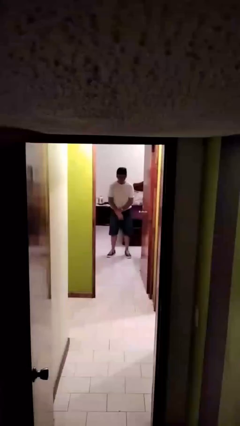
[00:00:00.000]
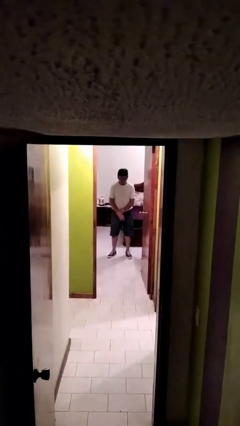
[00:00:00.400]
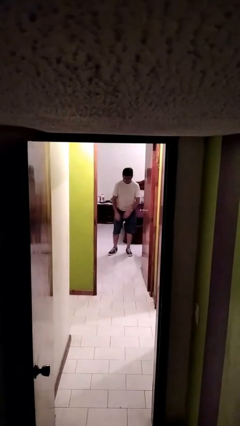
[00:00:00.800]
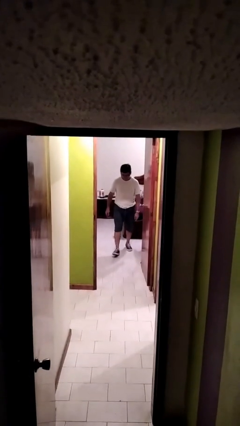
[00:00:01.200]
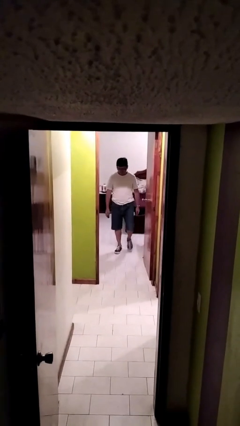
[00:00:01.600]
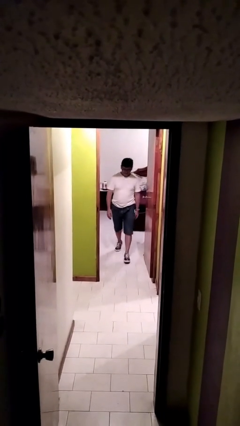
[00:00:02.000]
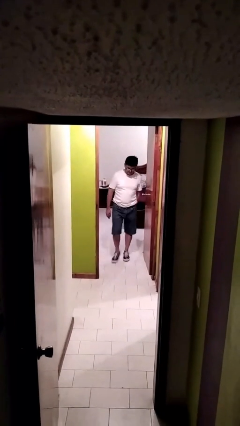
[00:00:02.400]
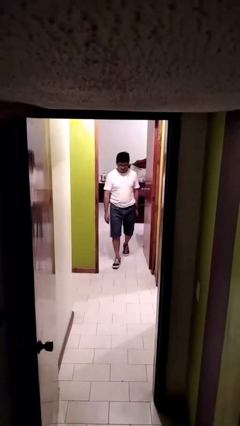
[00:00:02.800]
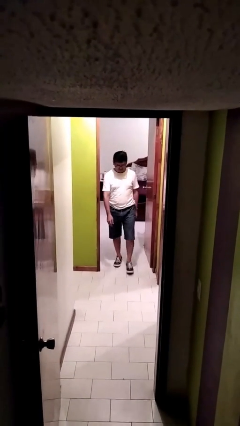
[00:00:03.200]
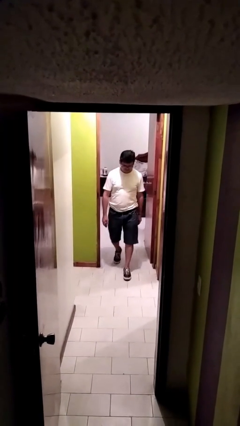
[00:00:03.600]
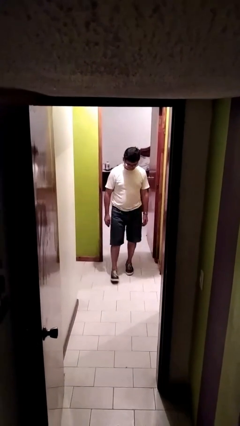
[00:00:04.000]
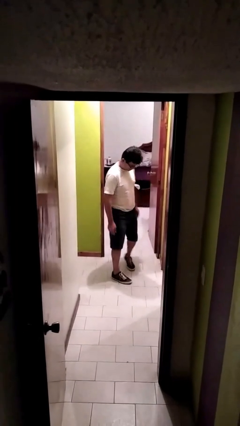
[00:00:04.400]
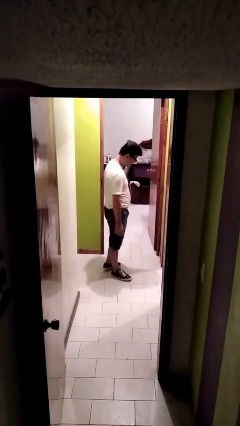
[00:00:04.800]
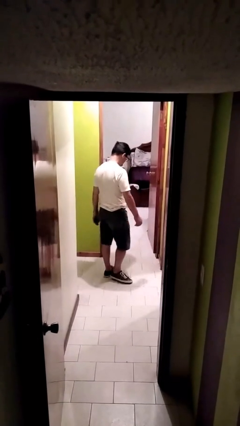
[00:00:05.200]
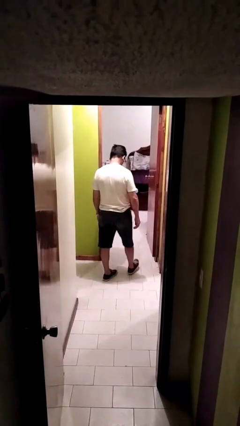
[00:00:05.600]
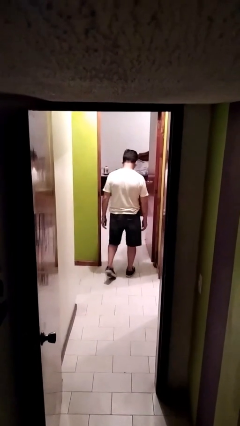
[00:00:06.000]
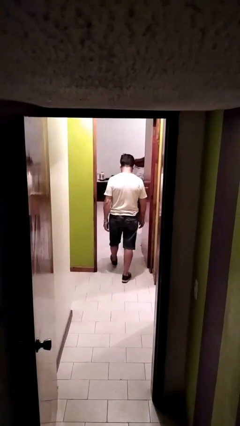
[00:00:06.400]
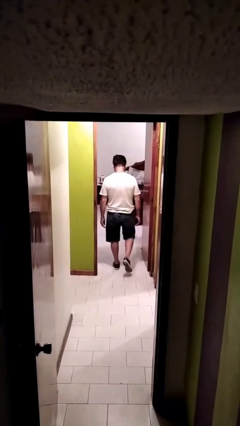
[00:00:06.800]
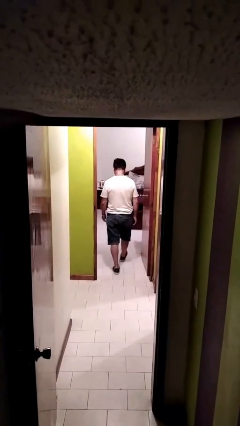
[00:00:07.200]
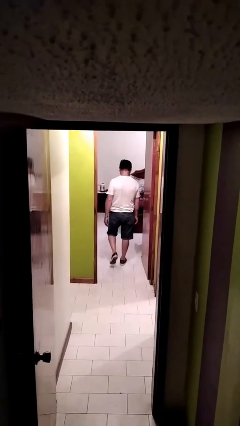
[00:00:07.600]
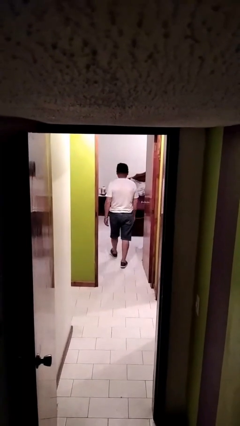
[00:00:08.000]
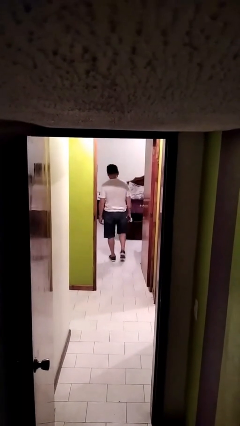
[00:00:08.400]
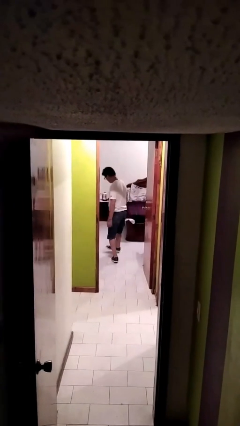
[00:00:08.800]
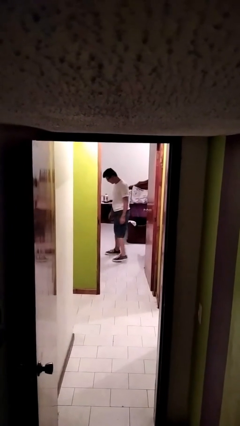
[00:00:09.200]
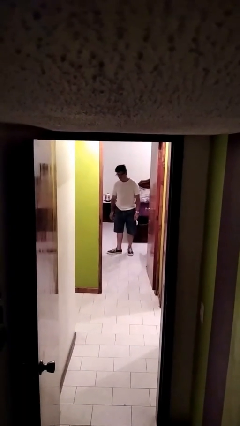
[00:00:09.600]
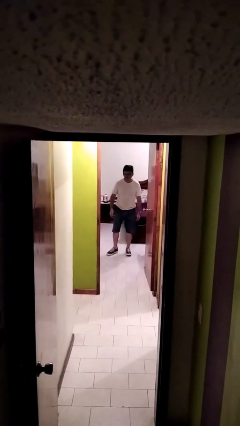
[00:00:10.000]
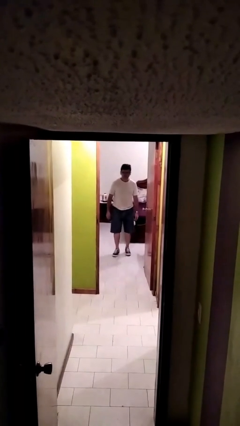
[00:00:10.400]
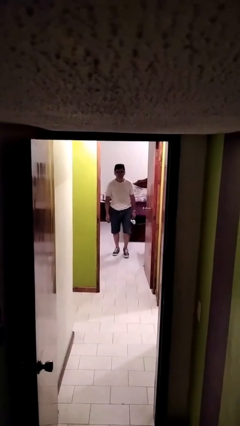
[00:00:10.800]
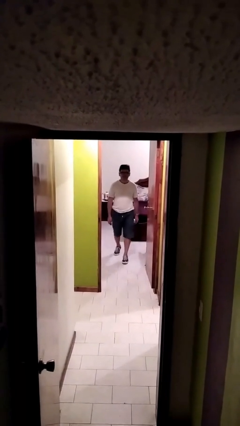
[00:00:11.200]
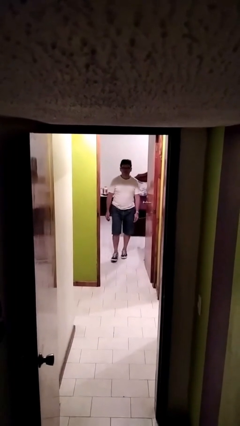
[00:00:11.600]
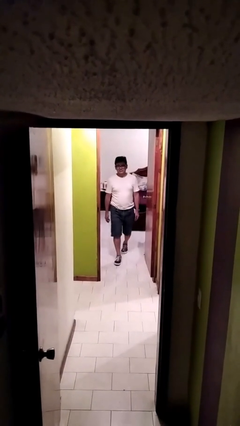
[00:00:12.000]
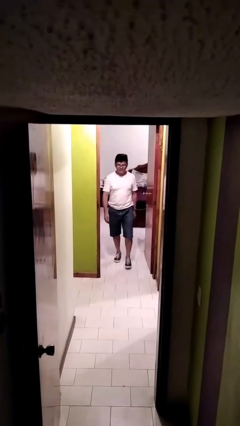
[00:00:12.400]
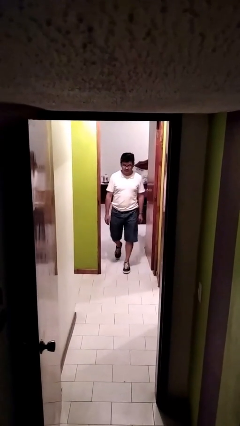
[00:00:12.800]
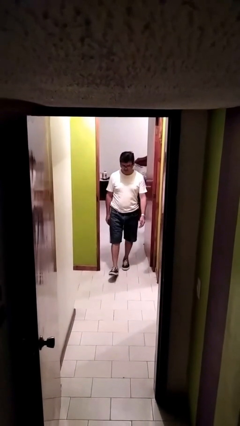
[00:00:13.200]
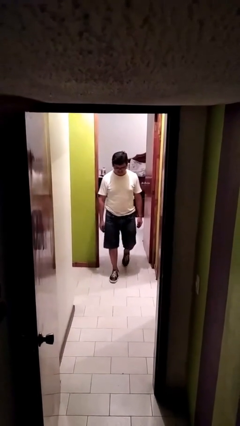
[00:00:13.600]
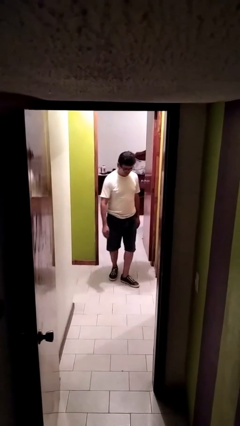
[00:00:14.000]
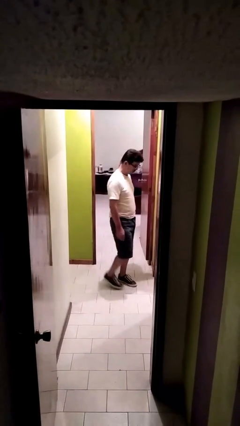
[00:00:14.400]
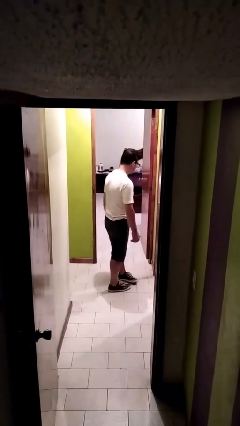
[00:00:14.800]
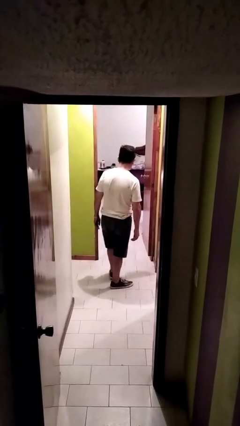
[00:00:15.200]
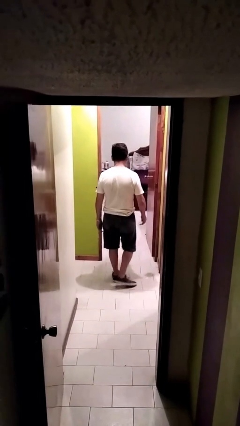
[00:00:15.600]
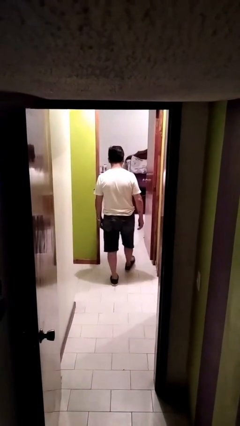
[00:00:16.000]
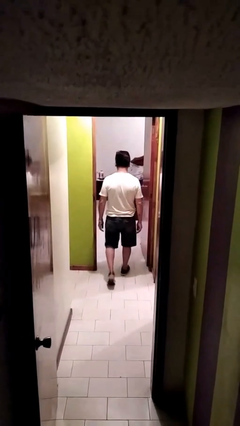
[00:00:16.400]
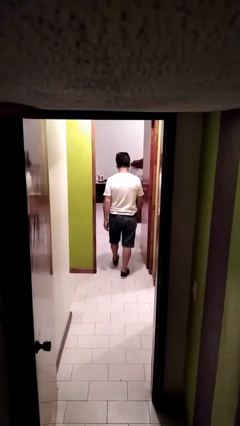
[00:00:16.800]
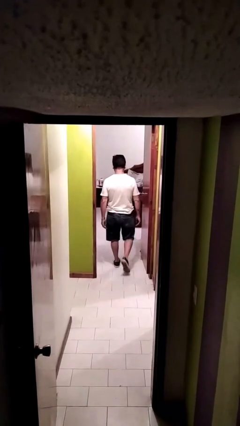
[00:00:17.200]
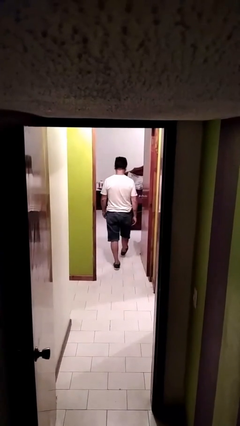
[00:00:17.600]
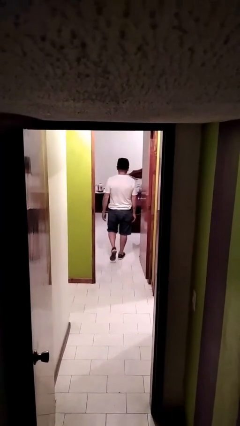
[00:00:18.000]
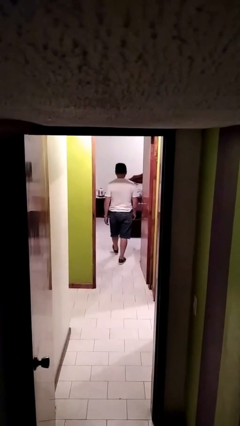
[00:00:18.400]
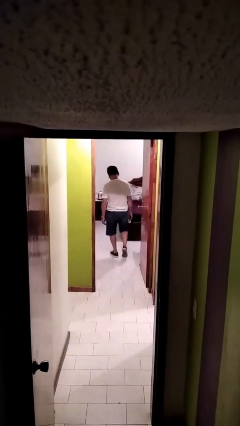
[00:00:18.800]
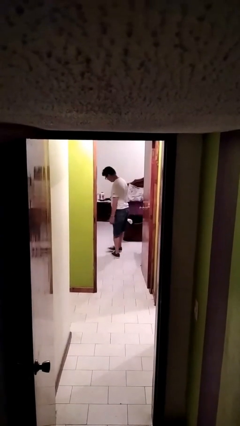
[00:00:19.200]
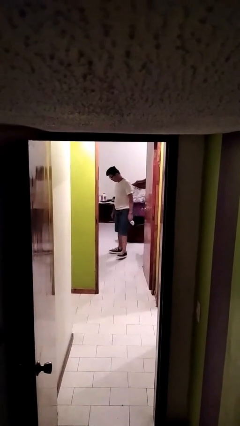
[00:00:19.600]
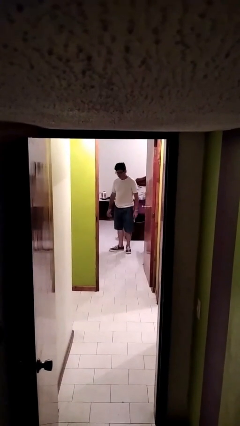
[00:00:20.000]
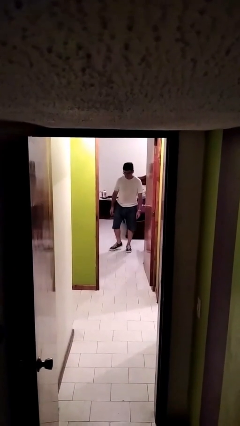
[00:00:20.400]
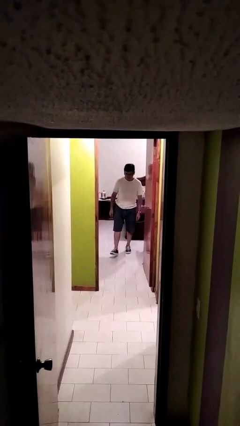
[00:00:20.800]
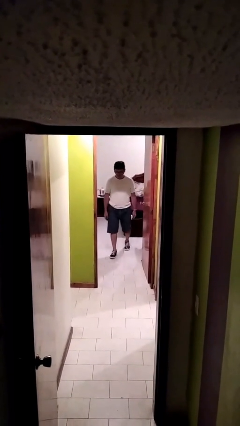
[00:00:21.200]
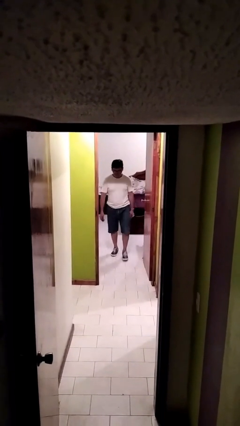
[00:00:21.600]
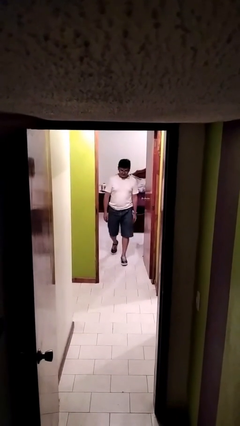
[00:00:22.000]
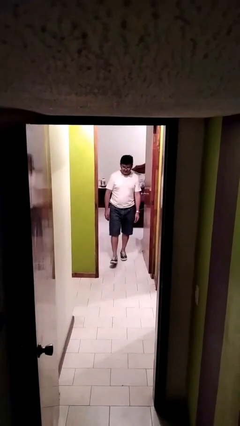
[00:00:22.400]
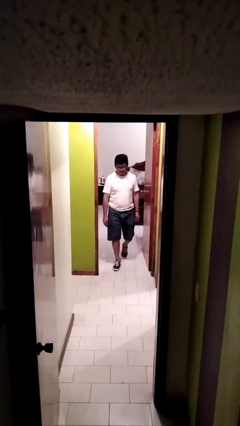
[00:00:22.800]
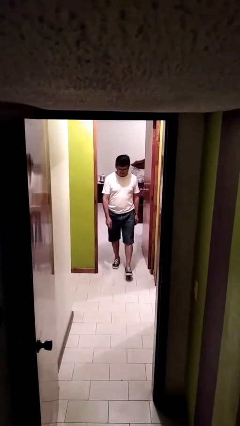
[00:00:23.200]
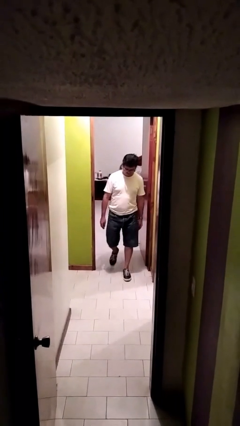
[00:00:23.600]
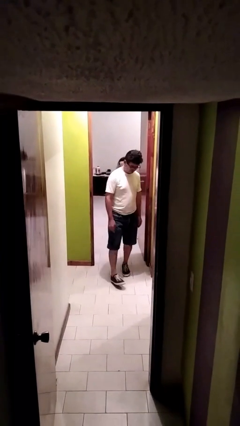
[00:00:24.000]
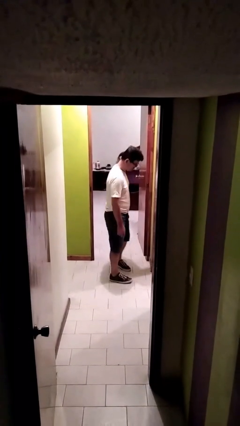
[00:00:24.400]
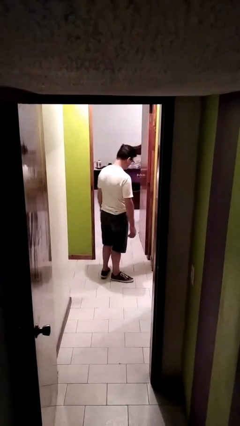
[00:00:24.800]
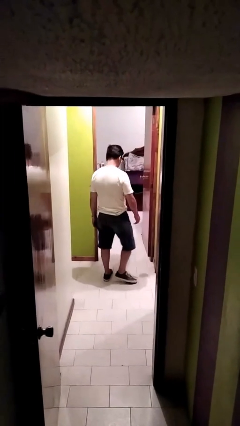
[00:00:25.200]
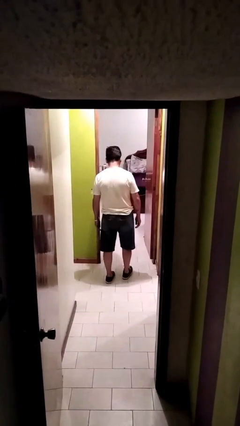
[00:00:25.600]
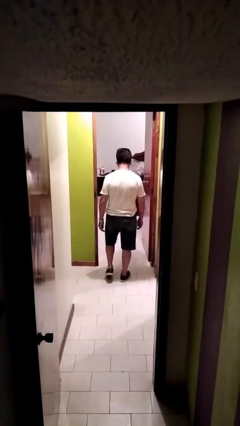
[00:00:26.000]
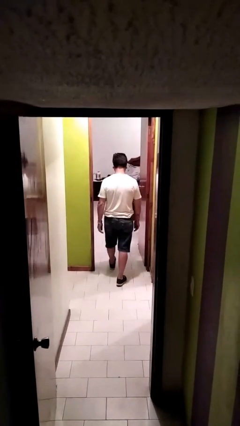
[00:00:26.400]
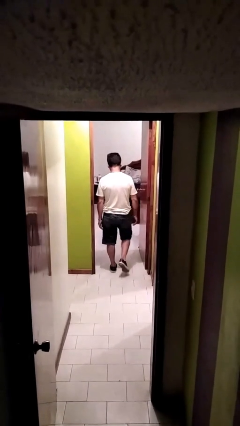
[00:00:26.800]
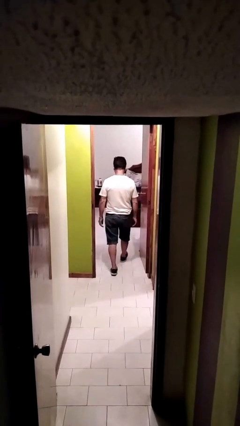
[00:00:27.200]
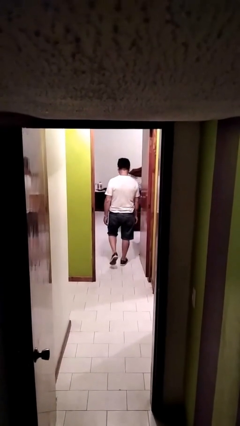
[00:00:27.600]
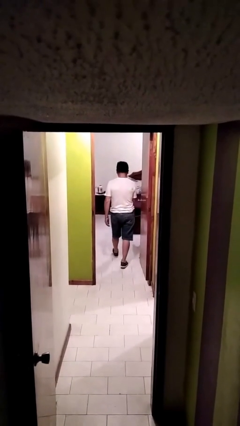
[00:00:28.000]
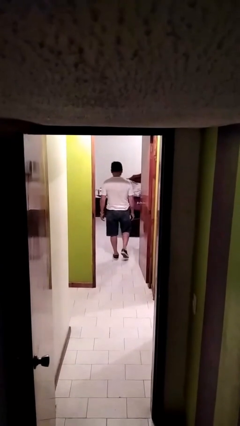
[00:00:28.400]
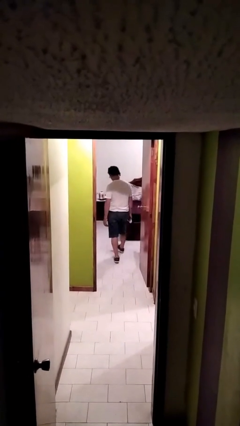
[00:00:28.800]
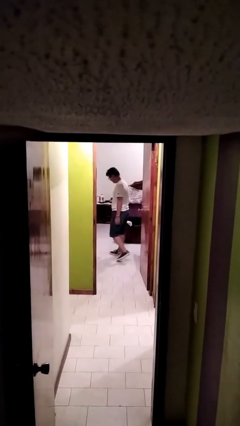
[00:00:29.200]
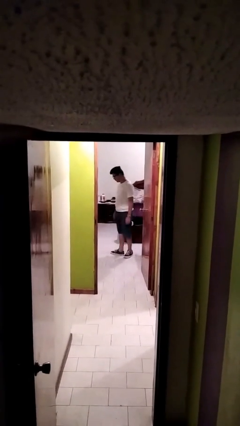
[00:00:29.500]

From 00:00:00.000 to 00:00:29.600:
person walks

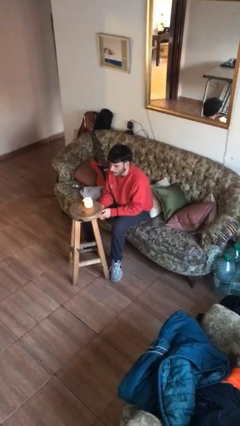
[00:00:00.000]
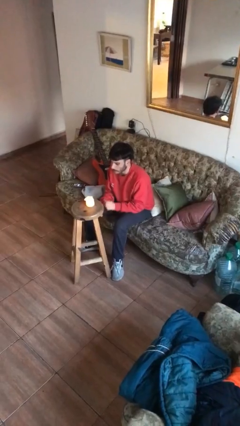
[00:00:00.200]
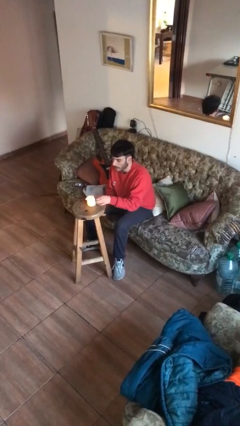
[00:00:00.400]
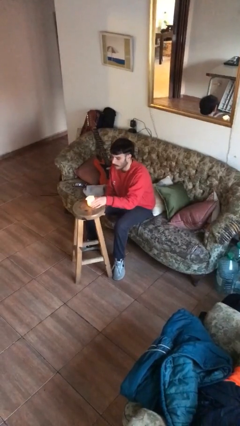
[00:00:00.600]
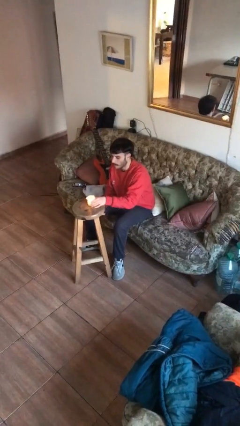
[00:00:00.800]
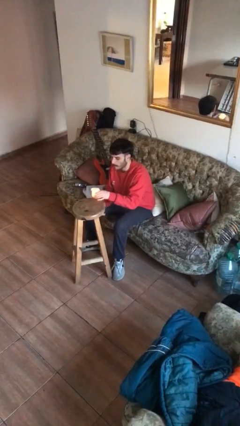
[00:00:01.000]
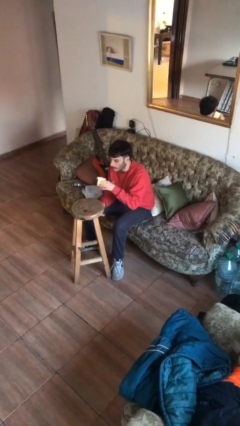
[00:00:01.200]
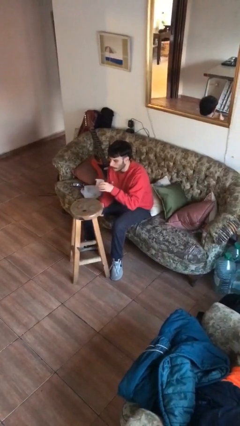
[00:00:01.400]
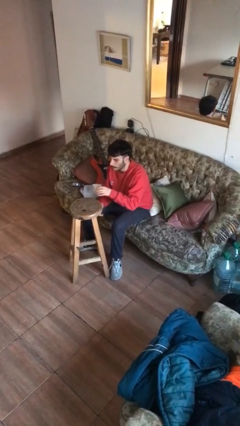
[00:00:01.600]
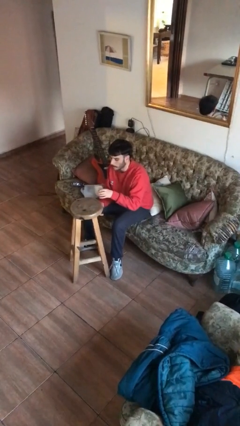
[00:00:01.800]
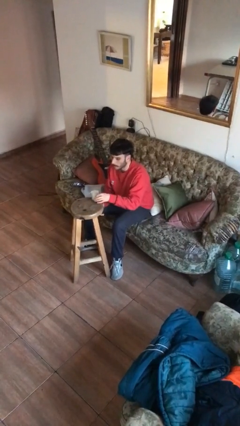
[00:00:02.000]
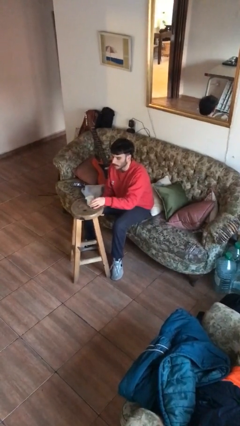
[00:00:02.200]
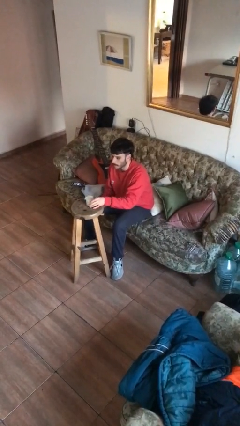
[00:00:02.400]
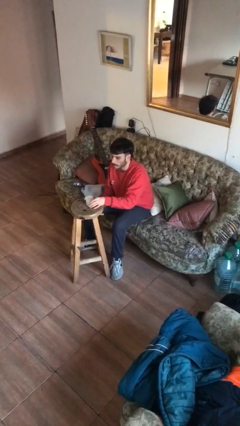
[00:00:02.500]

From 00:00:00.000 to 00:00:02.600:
person extinguishes candle

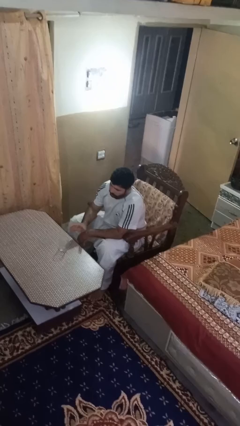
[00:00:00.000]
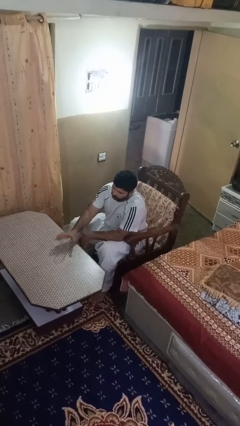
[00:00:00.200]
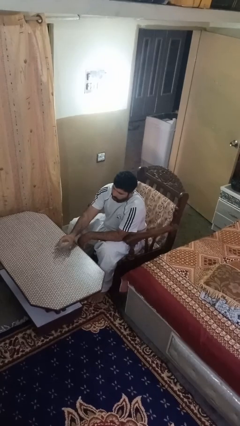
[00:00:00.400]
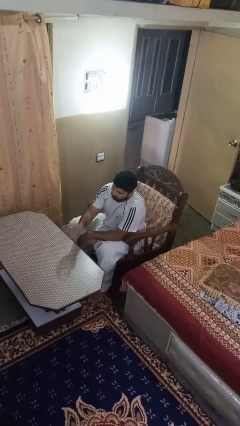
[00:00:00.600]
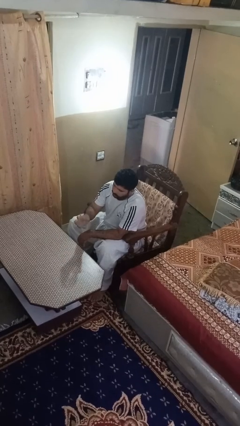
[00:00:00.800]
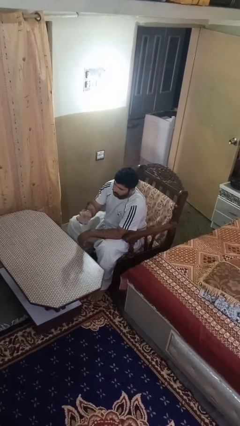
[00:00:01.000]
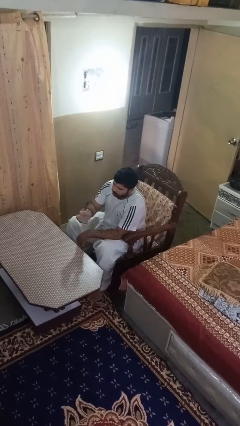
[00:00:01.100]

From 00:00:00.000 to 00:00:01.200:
person picks up object from table
